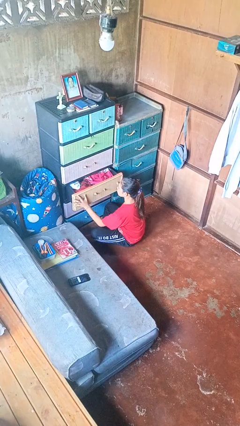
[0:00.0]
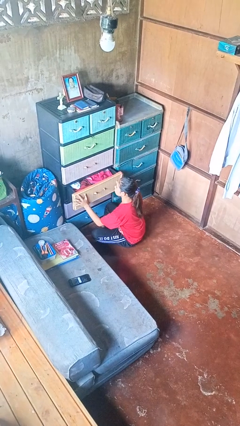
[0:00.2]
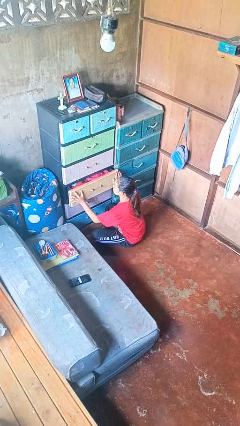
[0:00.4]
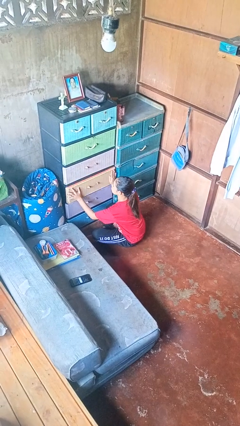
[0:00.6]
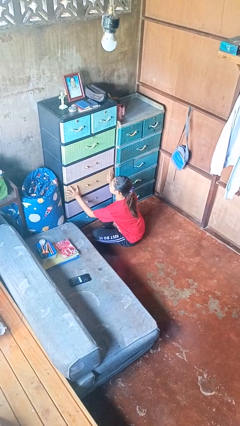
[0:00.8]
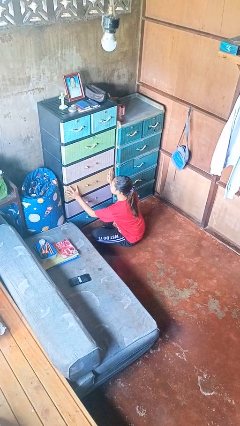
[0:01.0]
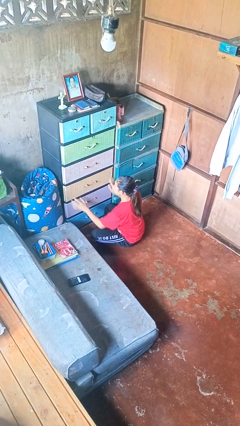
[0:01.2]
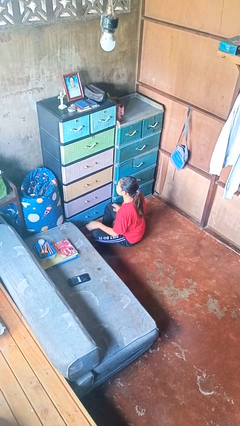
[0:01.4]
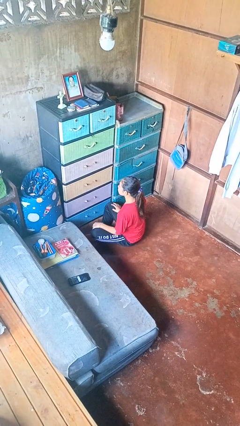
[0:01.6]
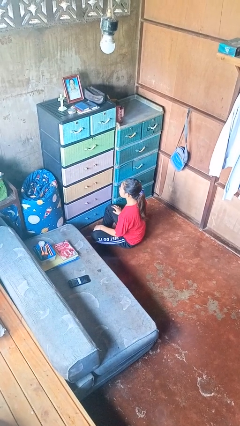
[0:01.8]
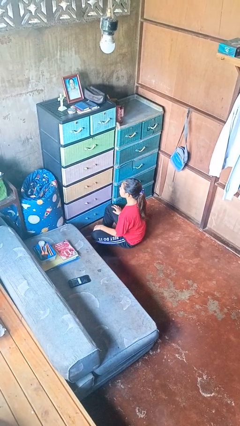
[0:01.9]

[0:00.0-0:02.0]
person closes dresser drawer

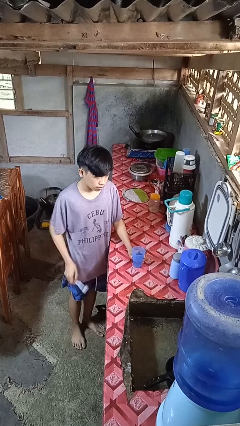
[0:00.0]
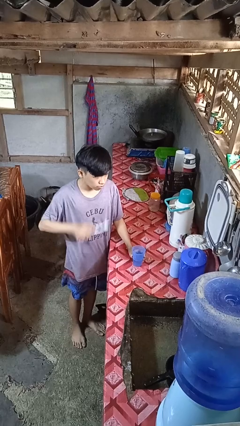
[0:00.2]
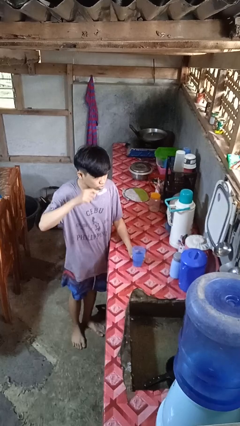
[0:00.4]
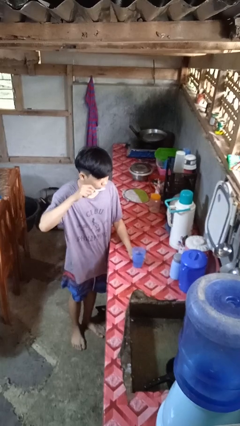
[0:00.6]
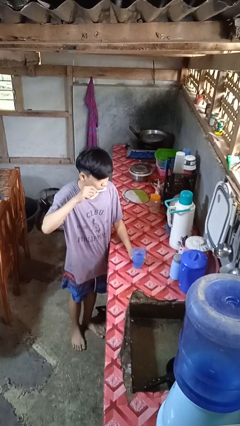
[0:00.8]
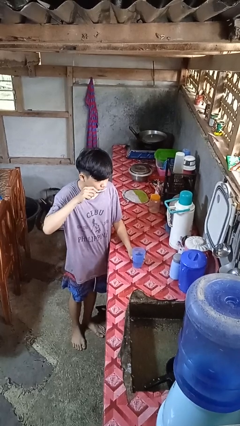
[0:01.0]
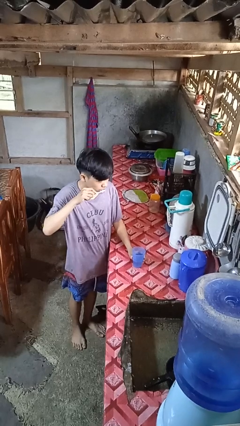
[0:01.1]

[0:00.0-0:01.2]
person brushes teeth

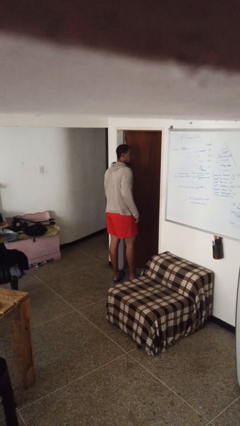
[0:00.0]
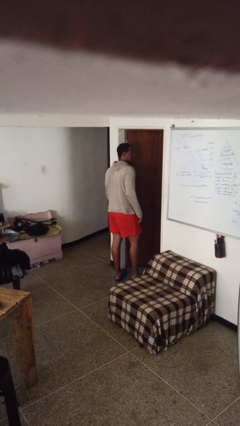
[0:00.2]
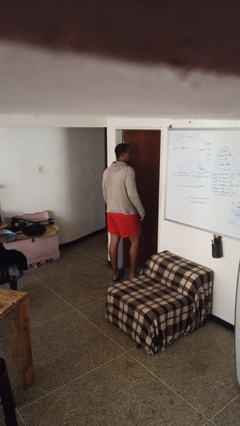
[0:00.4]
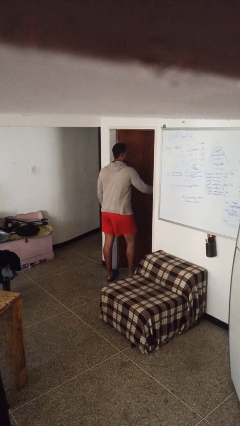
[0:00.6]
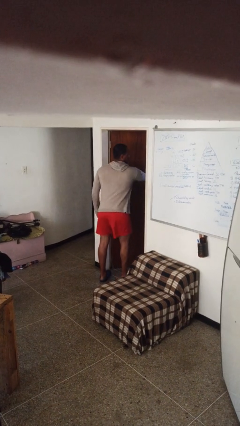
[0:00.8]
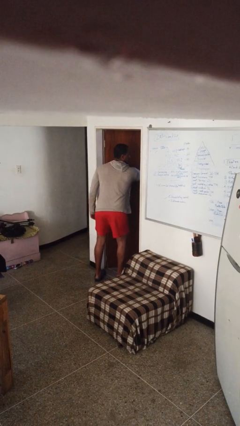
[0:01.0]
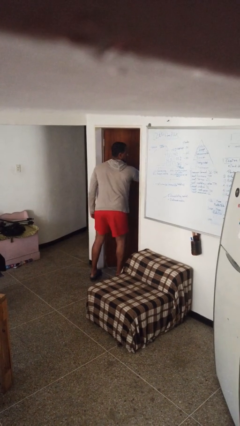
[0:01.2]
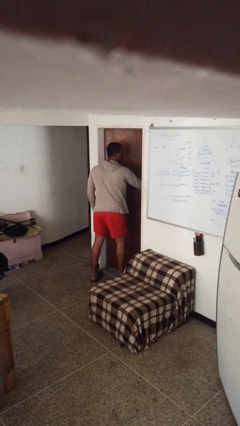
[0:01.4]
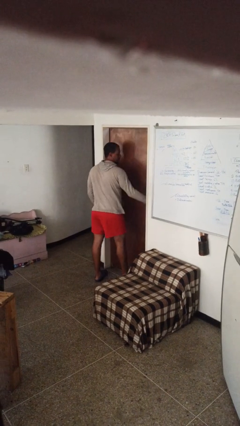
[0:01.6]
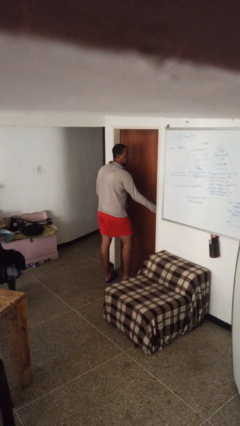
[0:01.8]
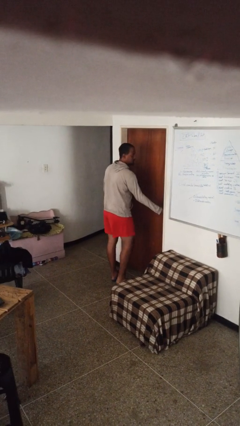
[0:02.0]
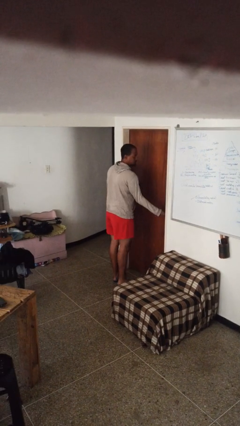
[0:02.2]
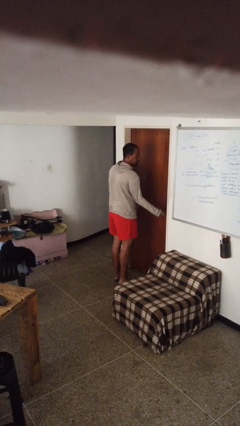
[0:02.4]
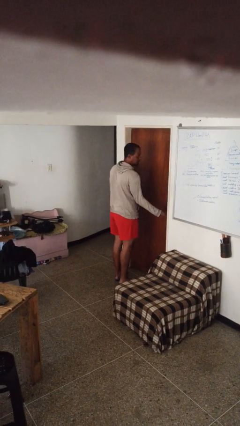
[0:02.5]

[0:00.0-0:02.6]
person closes facility door

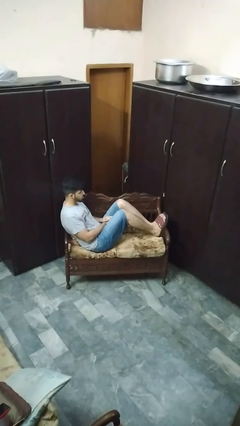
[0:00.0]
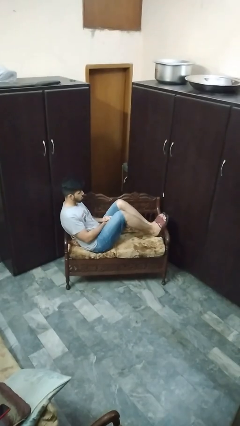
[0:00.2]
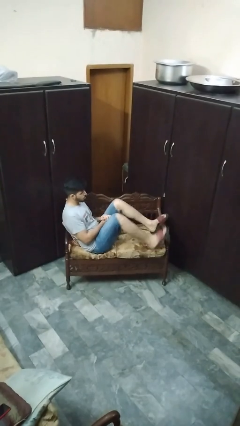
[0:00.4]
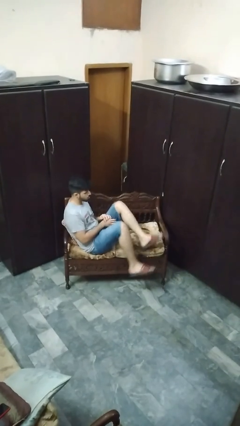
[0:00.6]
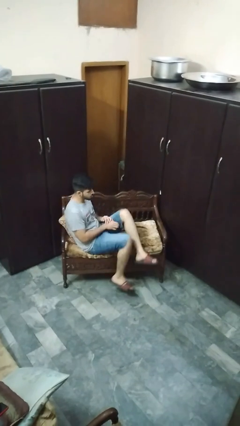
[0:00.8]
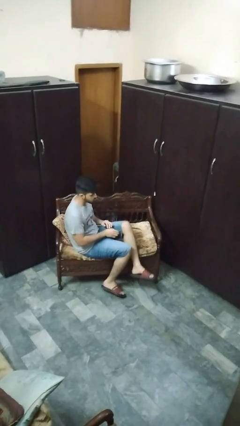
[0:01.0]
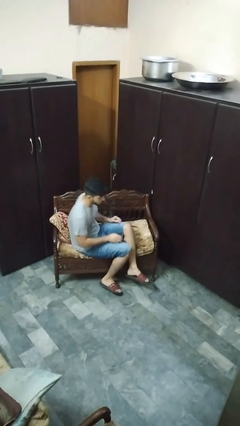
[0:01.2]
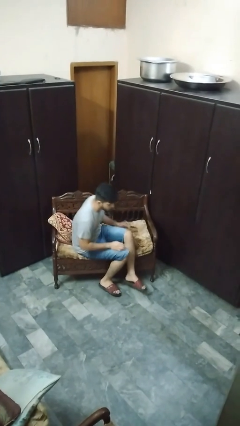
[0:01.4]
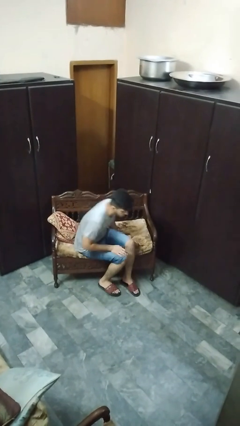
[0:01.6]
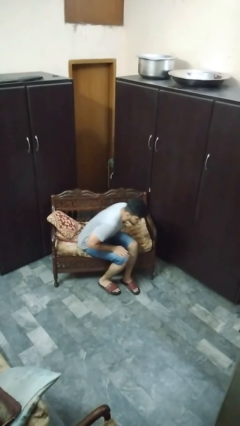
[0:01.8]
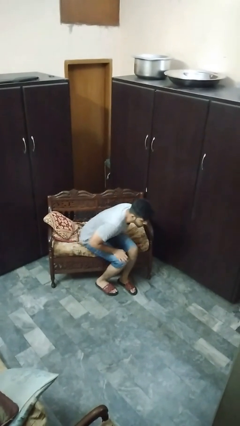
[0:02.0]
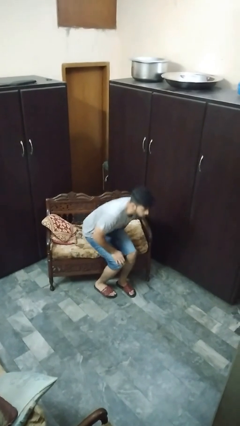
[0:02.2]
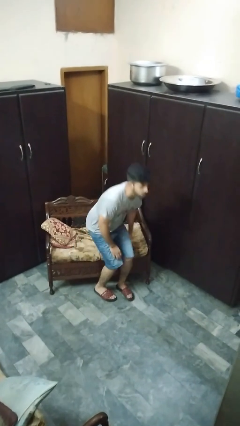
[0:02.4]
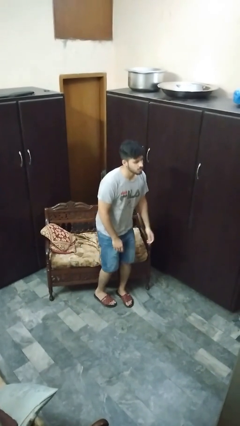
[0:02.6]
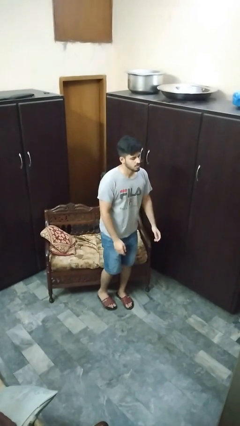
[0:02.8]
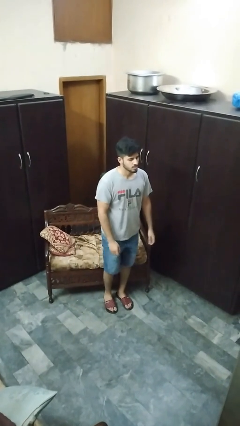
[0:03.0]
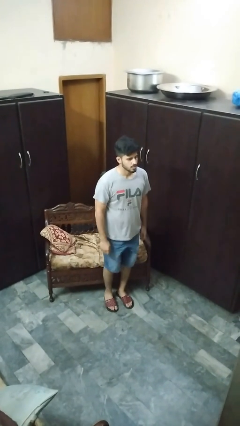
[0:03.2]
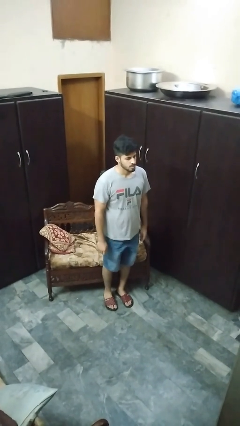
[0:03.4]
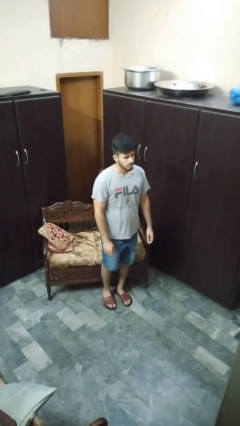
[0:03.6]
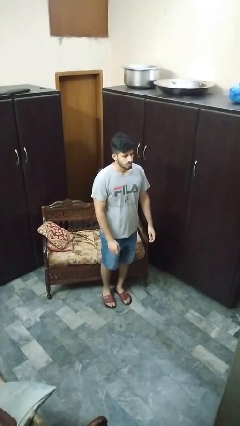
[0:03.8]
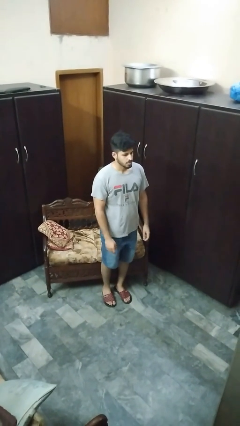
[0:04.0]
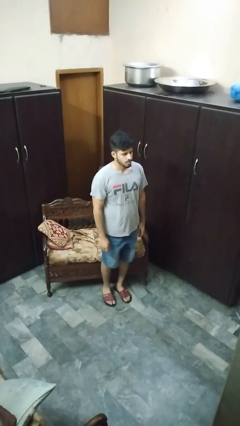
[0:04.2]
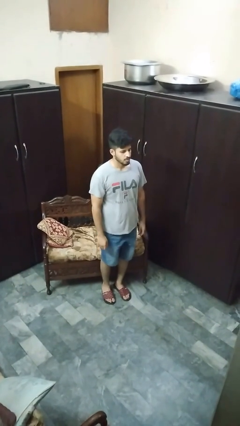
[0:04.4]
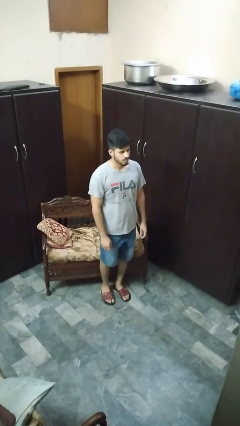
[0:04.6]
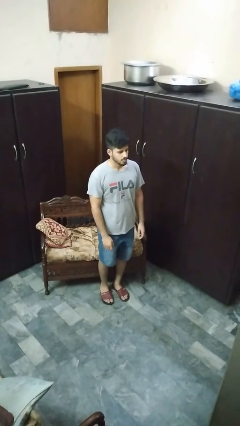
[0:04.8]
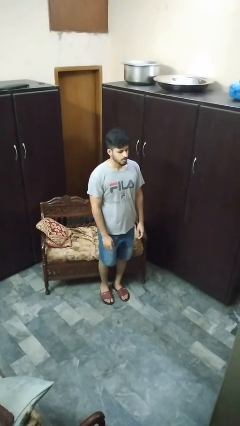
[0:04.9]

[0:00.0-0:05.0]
person stands up

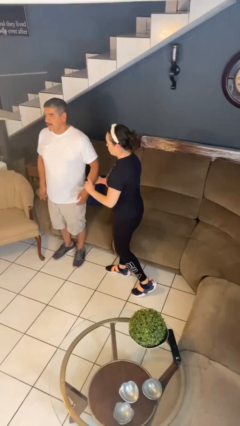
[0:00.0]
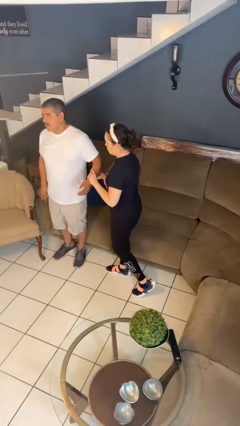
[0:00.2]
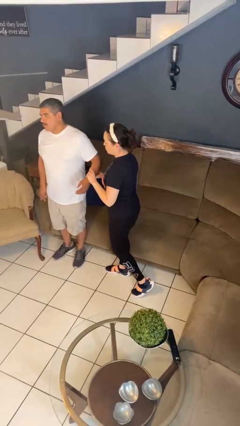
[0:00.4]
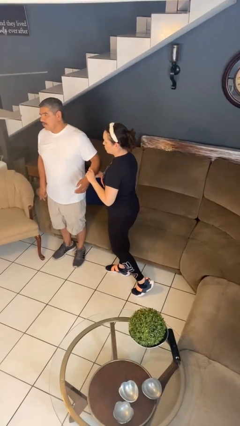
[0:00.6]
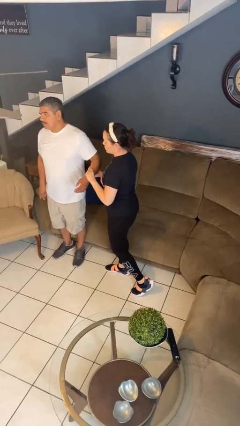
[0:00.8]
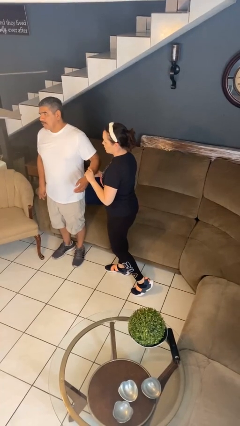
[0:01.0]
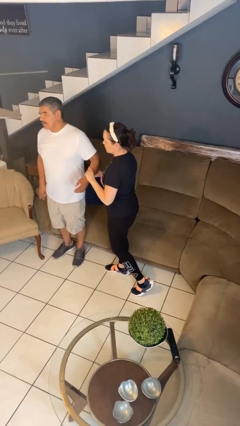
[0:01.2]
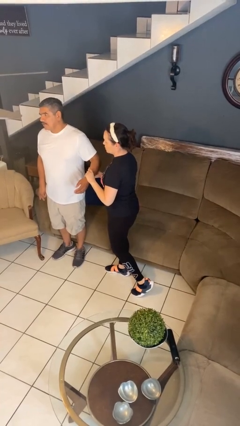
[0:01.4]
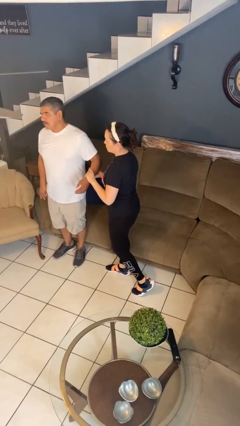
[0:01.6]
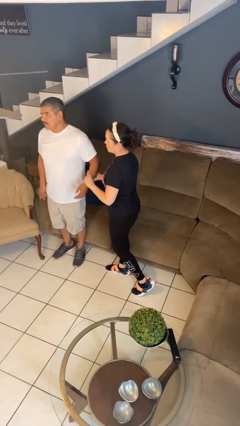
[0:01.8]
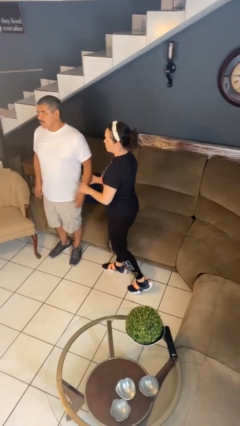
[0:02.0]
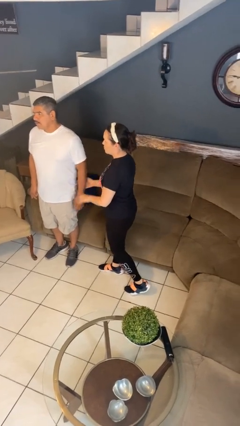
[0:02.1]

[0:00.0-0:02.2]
person grabs person by forearm

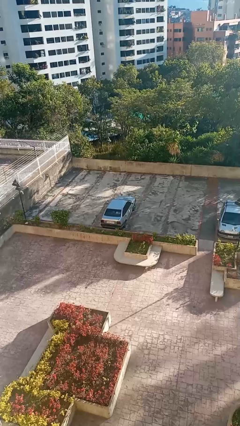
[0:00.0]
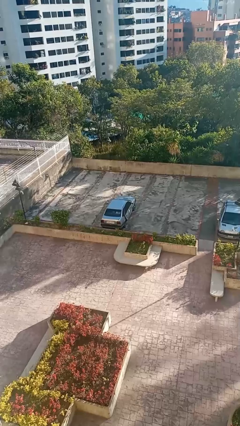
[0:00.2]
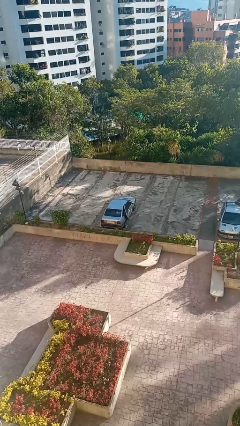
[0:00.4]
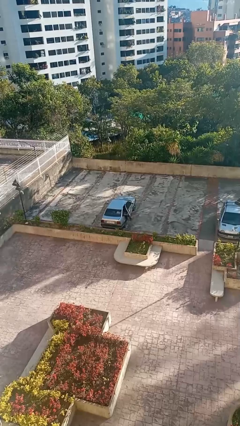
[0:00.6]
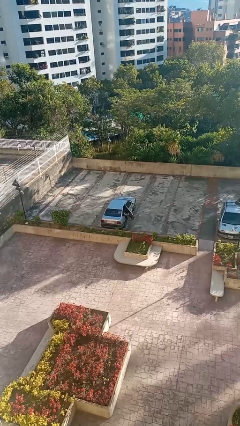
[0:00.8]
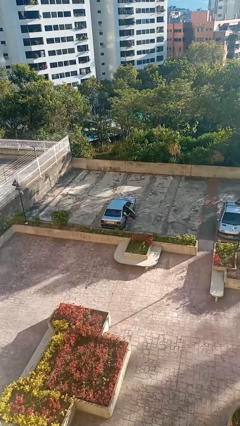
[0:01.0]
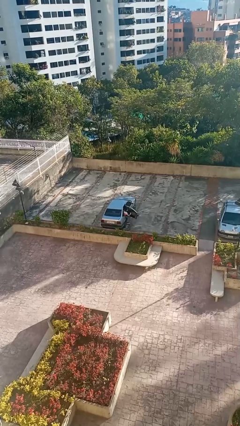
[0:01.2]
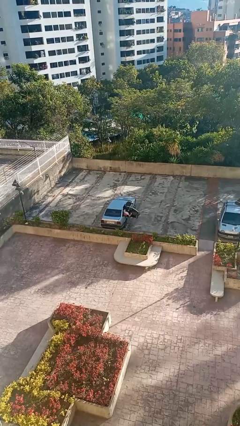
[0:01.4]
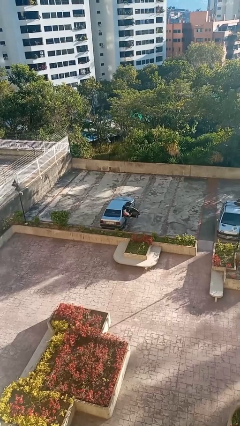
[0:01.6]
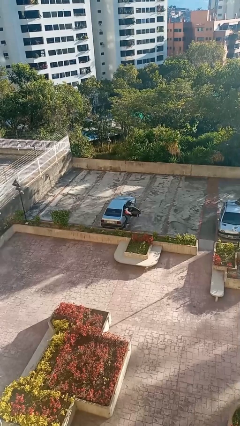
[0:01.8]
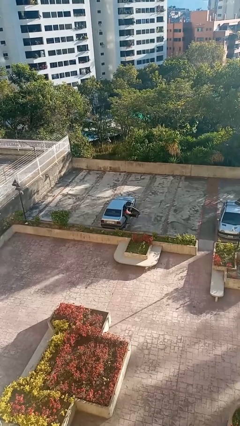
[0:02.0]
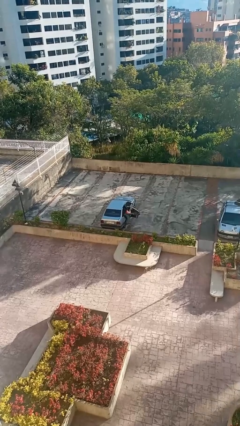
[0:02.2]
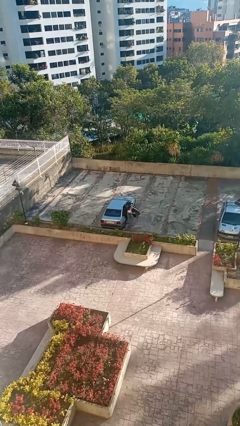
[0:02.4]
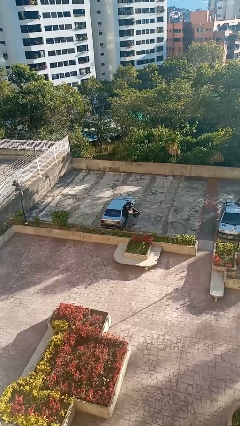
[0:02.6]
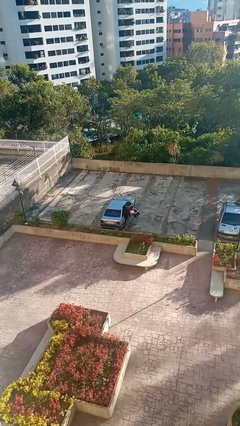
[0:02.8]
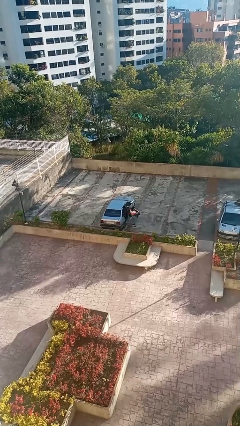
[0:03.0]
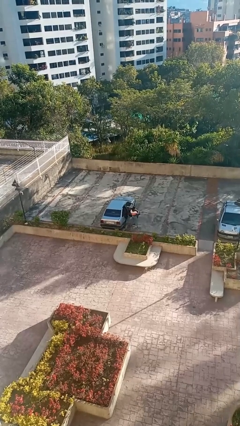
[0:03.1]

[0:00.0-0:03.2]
car drops off person

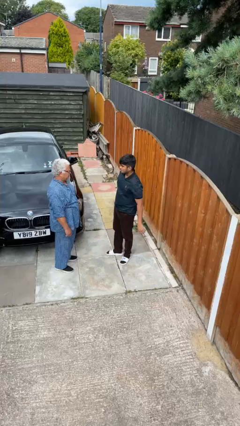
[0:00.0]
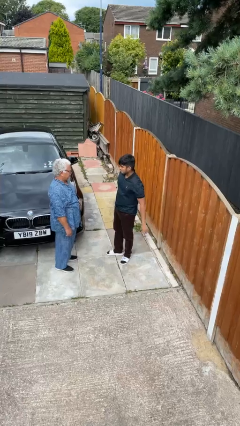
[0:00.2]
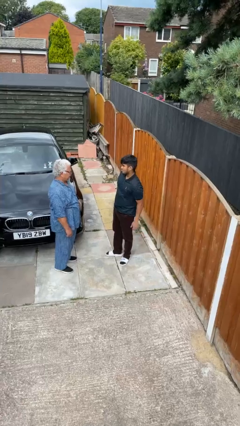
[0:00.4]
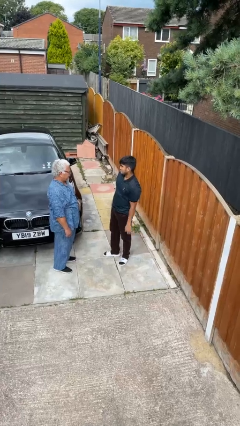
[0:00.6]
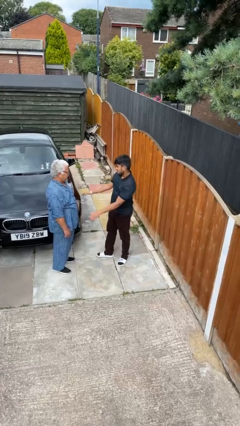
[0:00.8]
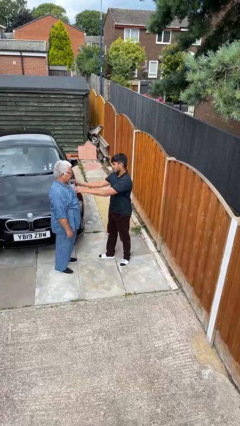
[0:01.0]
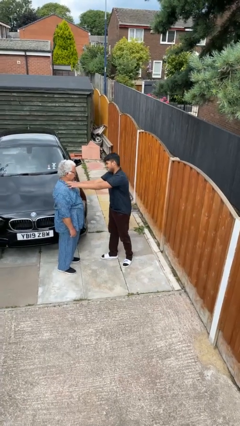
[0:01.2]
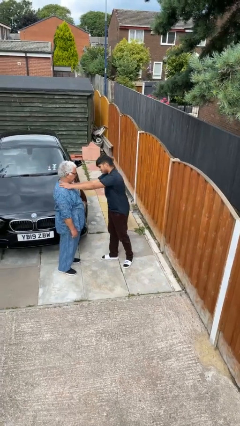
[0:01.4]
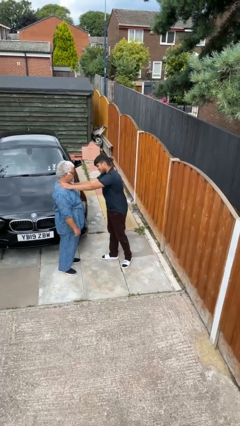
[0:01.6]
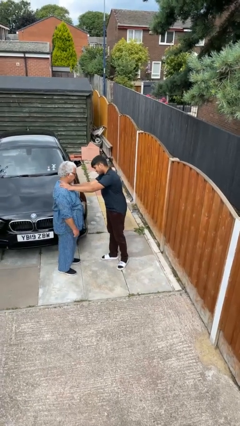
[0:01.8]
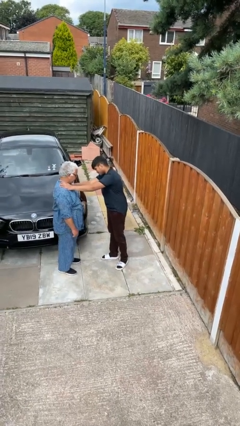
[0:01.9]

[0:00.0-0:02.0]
person shoves person
